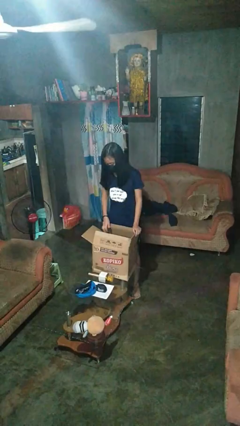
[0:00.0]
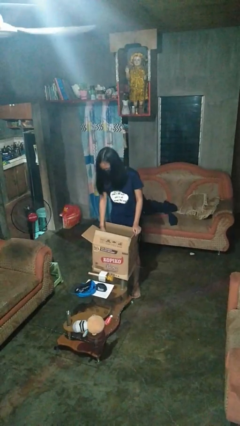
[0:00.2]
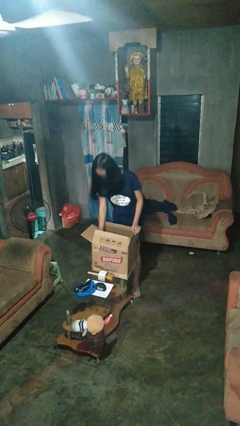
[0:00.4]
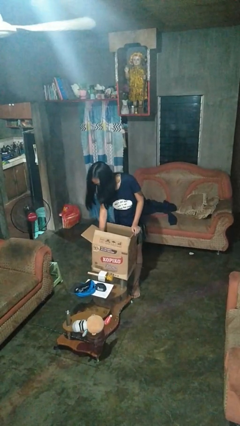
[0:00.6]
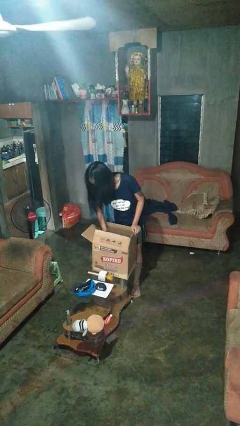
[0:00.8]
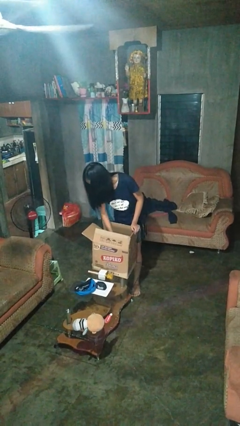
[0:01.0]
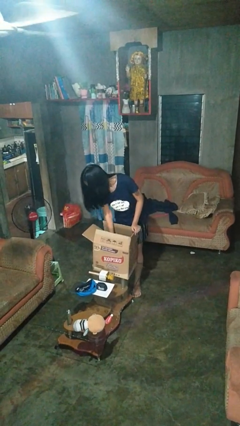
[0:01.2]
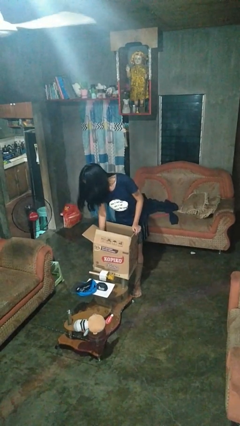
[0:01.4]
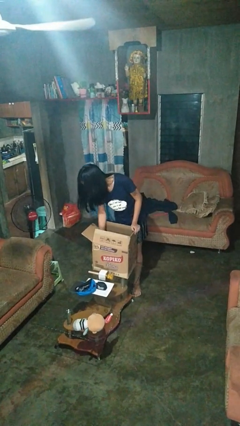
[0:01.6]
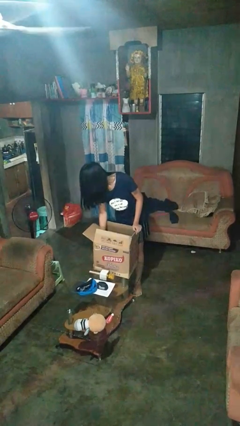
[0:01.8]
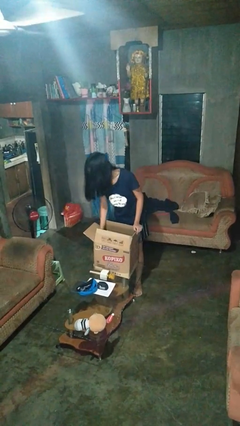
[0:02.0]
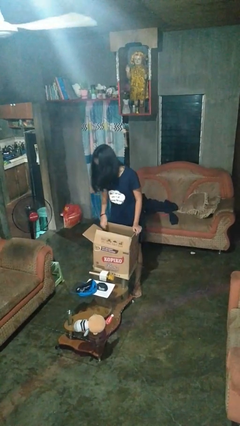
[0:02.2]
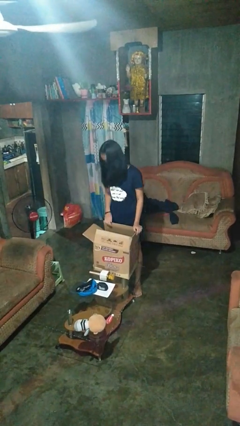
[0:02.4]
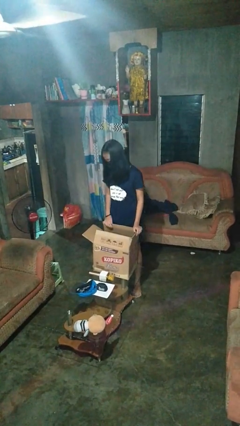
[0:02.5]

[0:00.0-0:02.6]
person searches in box

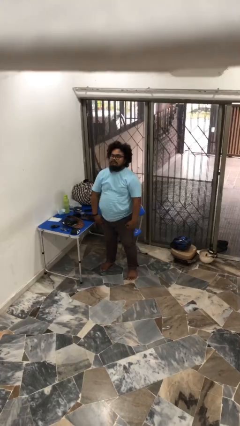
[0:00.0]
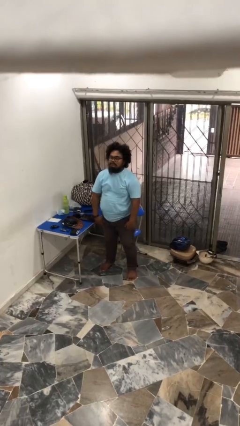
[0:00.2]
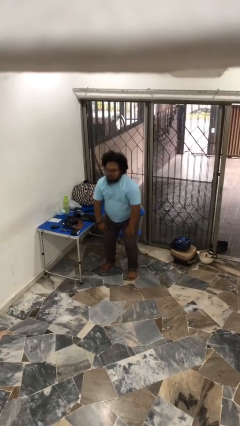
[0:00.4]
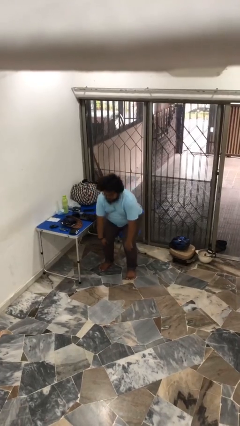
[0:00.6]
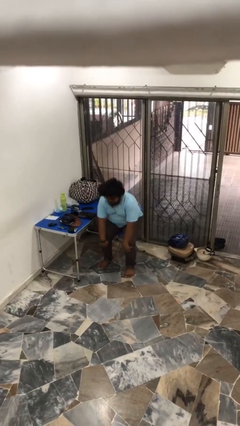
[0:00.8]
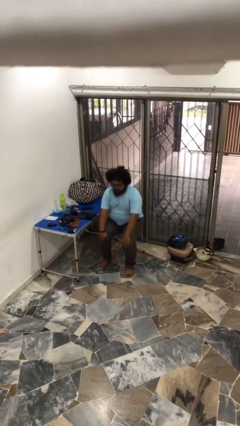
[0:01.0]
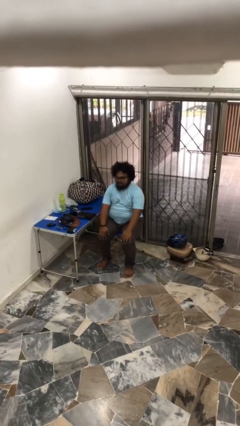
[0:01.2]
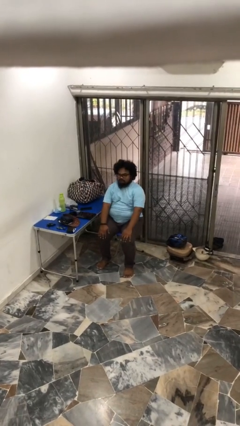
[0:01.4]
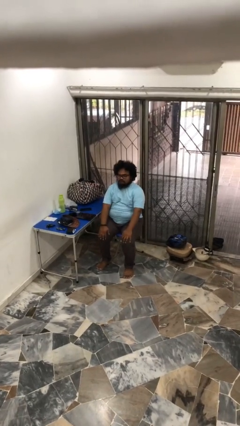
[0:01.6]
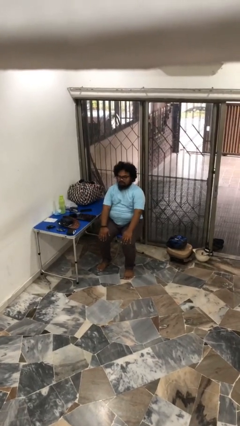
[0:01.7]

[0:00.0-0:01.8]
person sits down

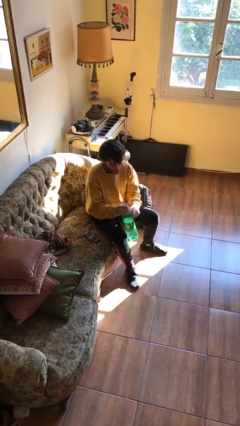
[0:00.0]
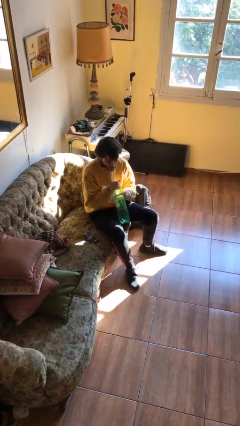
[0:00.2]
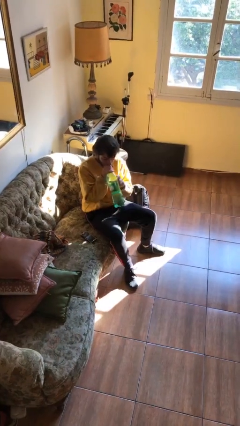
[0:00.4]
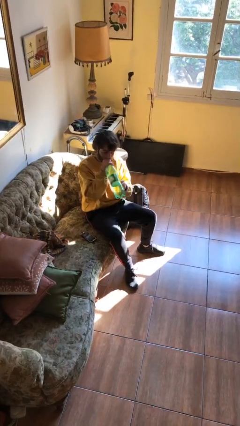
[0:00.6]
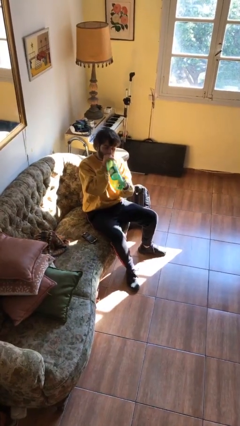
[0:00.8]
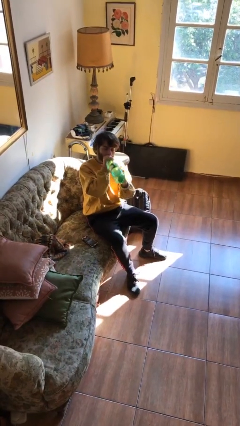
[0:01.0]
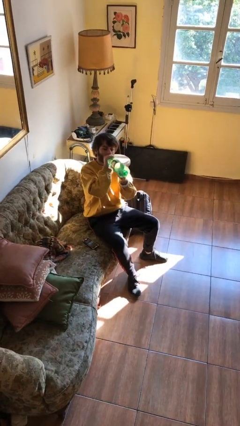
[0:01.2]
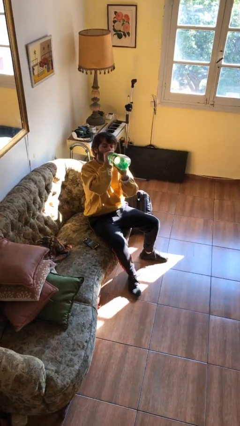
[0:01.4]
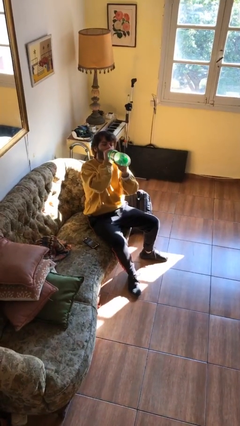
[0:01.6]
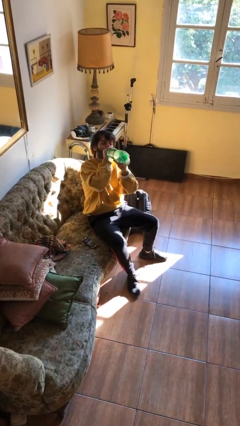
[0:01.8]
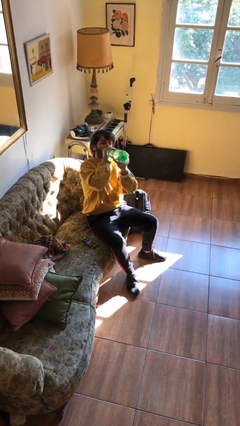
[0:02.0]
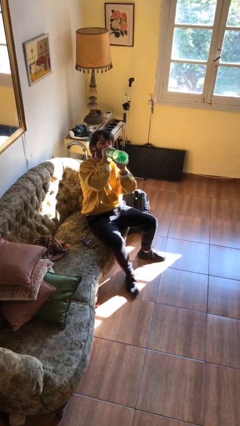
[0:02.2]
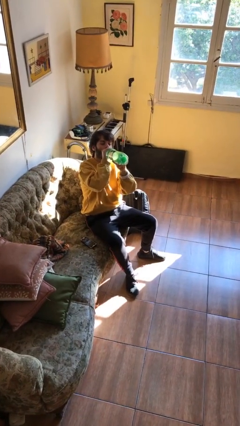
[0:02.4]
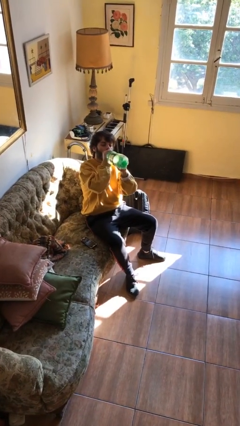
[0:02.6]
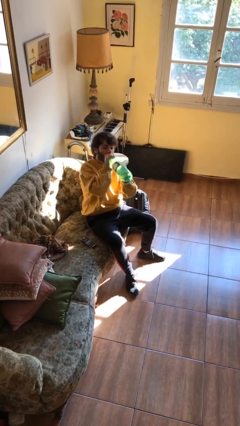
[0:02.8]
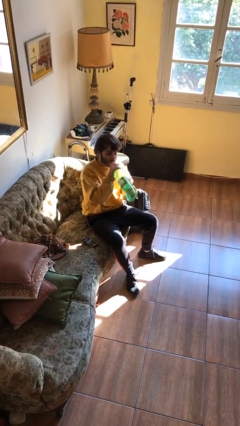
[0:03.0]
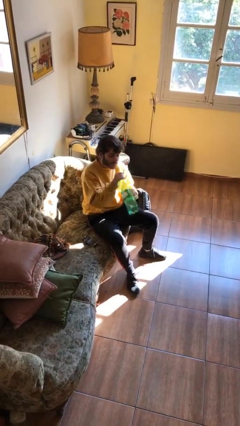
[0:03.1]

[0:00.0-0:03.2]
person drinks from bottle

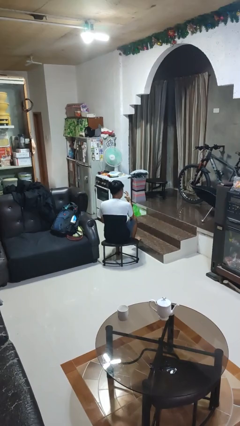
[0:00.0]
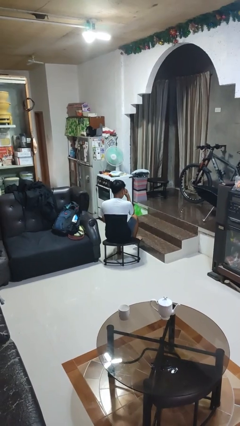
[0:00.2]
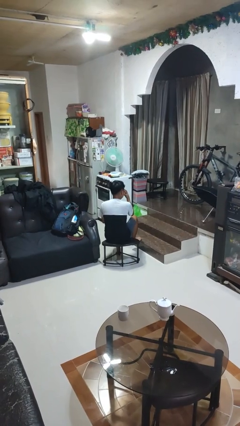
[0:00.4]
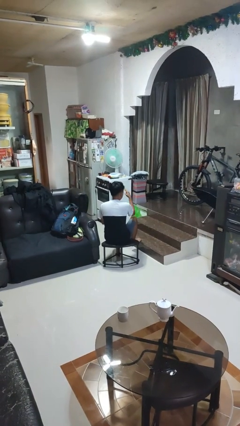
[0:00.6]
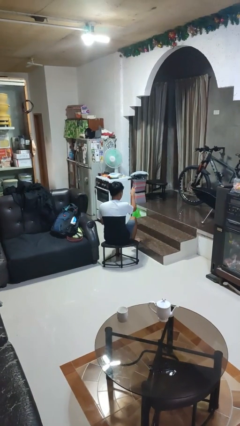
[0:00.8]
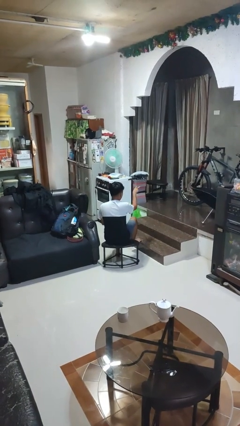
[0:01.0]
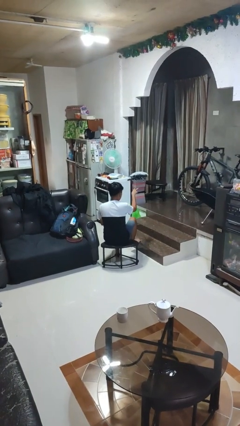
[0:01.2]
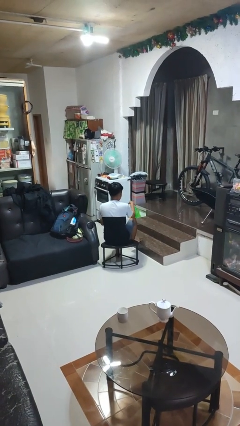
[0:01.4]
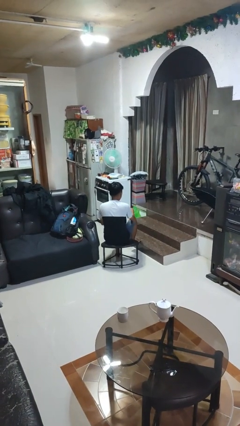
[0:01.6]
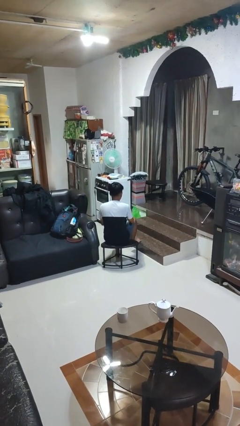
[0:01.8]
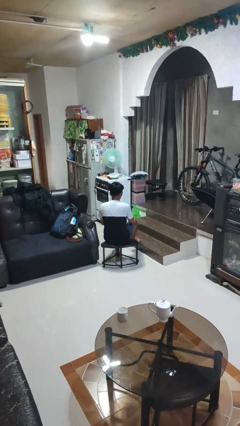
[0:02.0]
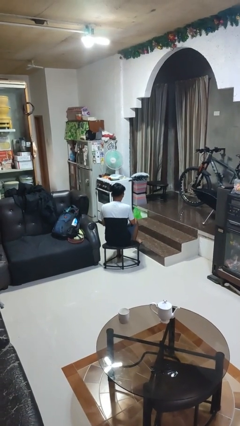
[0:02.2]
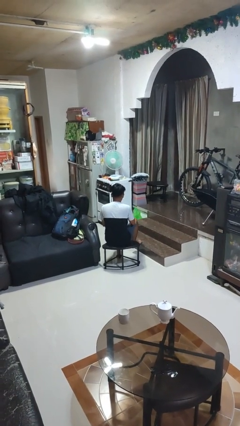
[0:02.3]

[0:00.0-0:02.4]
person gestures watch closely

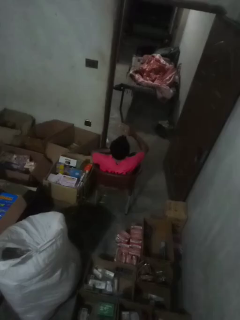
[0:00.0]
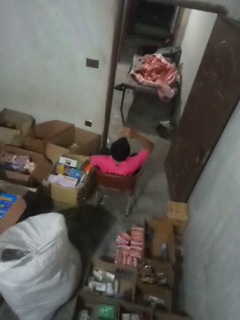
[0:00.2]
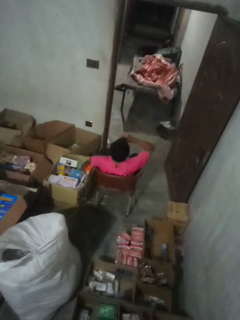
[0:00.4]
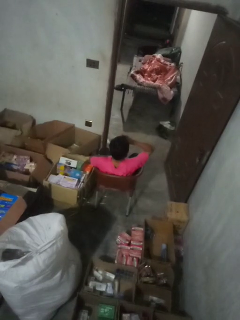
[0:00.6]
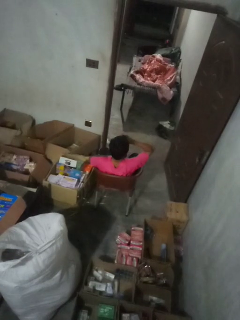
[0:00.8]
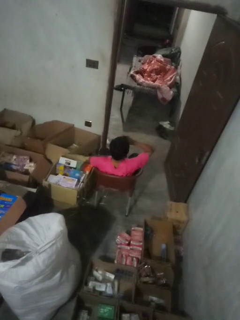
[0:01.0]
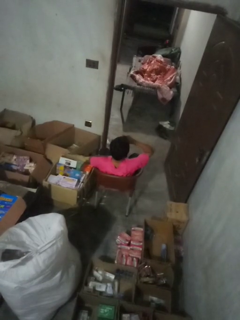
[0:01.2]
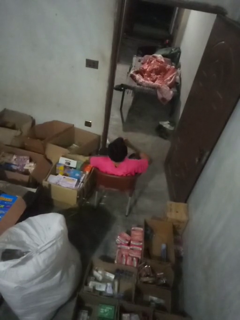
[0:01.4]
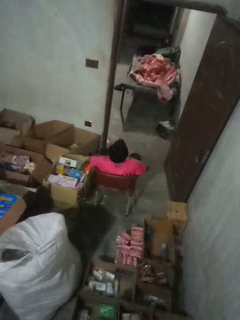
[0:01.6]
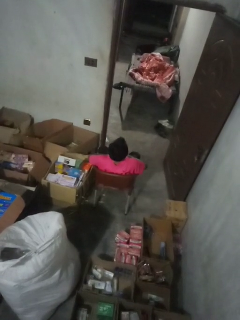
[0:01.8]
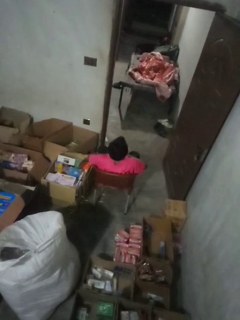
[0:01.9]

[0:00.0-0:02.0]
person shades eyes

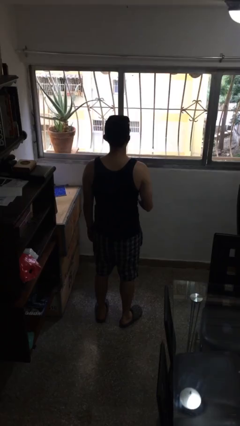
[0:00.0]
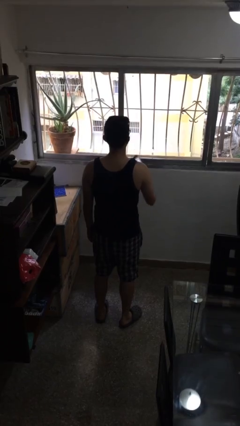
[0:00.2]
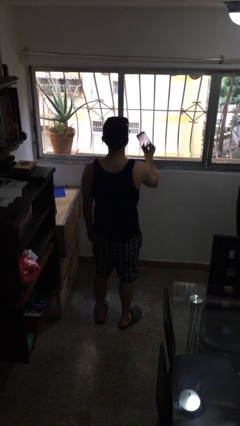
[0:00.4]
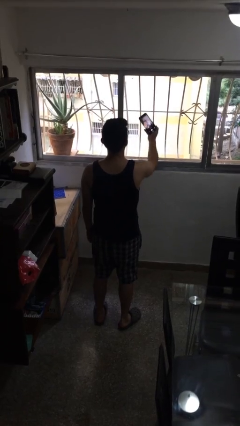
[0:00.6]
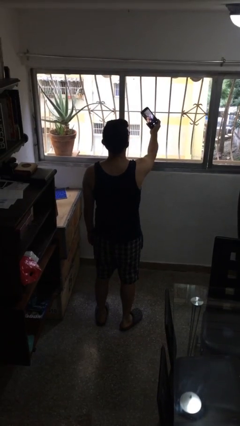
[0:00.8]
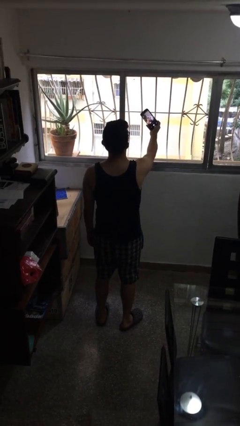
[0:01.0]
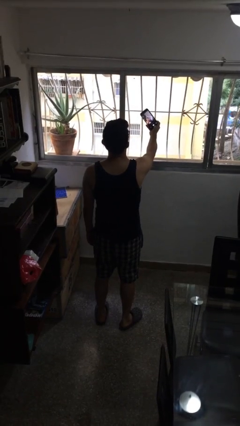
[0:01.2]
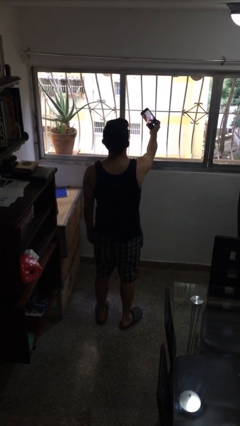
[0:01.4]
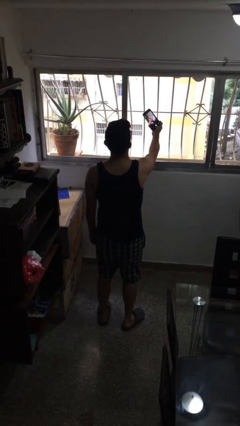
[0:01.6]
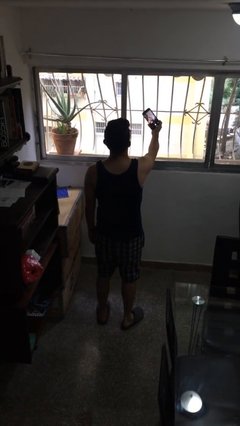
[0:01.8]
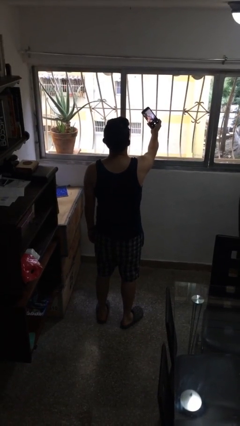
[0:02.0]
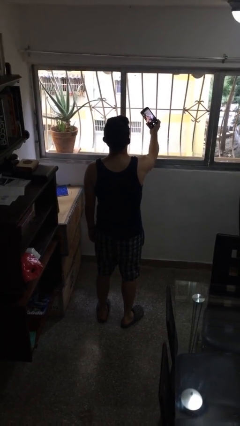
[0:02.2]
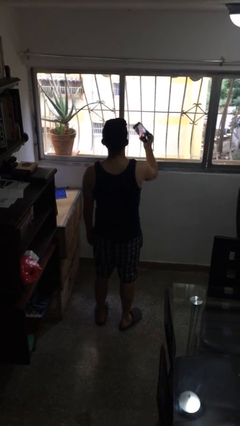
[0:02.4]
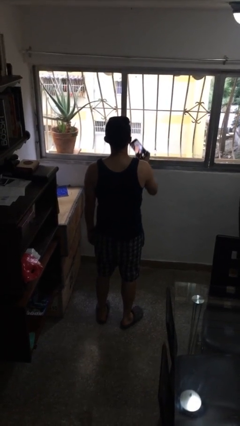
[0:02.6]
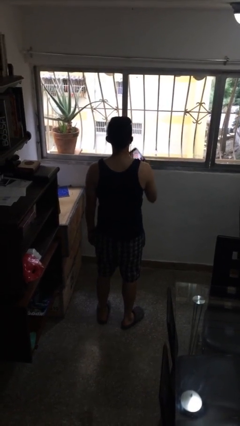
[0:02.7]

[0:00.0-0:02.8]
person takes selfie

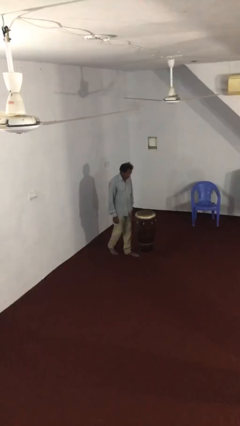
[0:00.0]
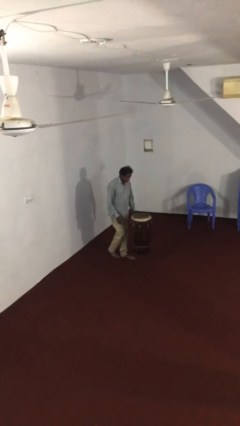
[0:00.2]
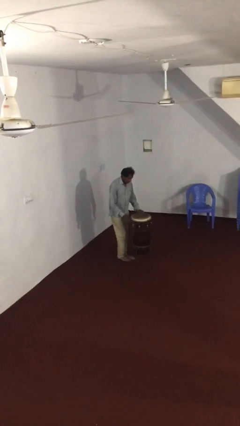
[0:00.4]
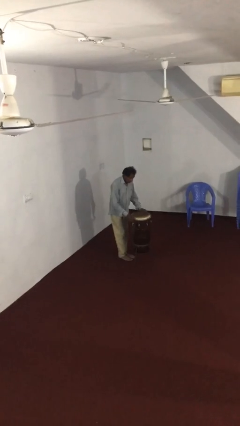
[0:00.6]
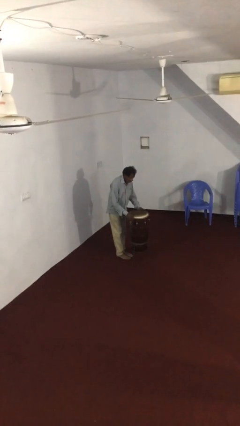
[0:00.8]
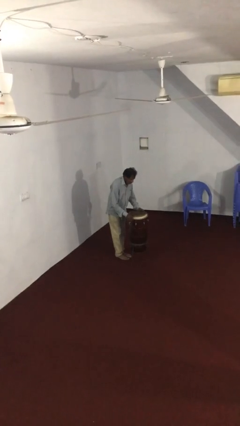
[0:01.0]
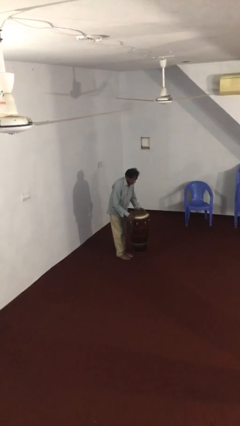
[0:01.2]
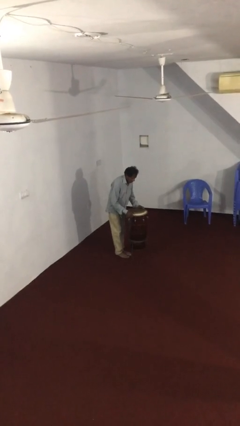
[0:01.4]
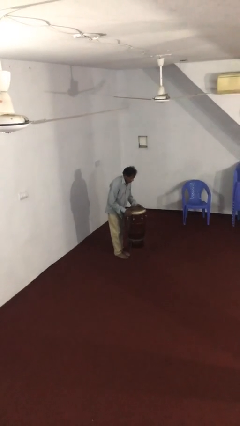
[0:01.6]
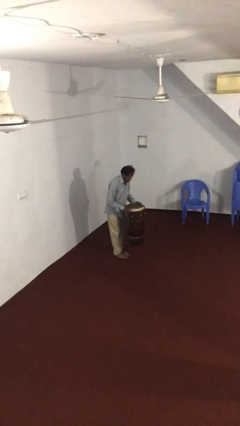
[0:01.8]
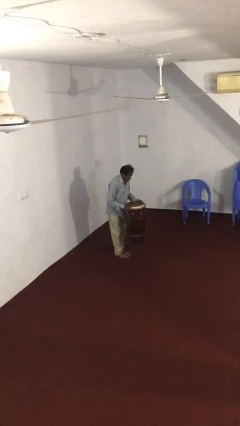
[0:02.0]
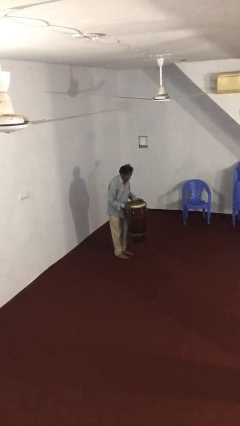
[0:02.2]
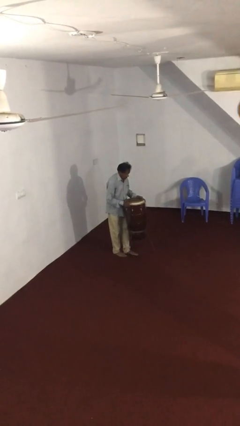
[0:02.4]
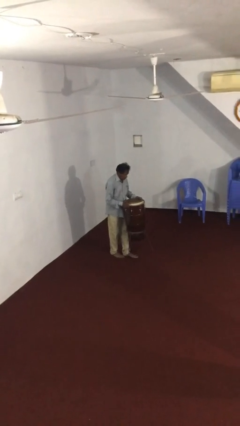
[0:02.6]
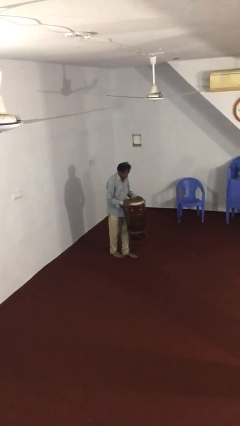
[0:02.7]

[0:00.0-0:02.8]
person picks up object from floor
